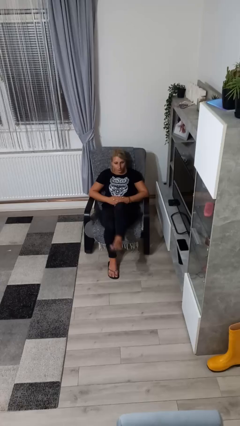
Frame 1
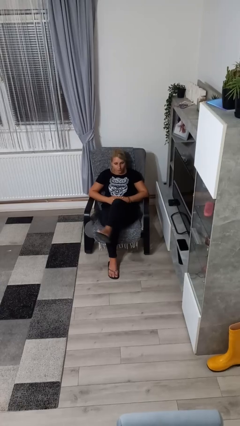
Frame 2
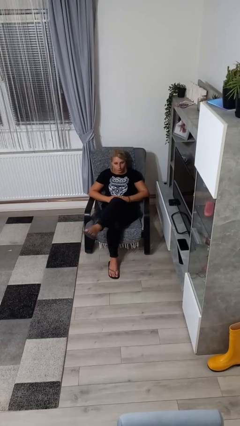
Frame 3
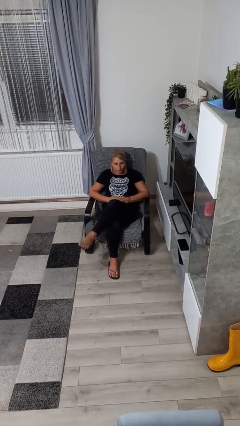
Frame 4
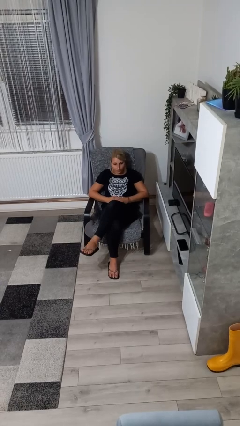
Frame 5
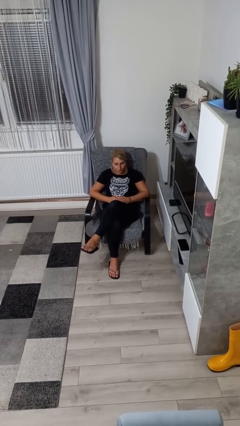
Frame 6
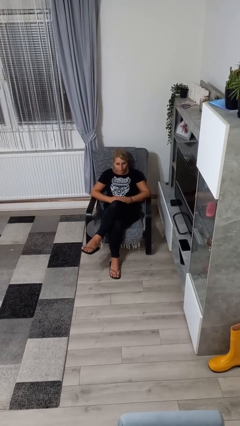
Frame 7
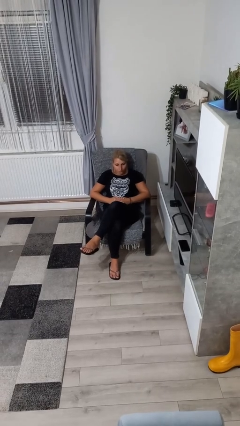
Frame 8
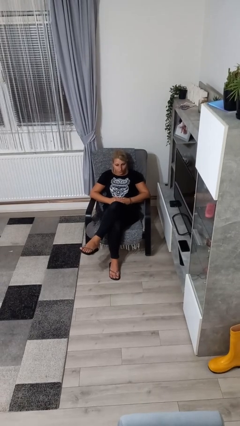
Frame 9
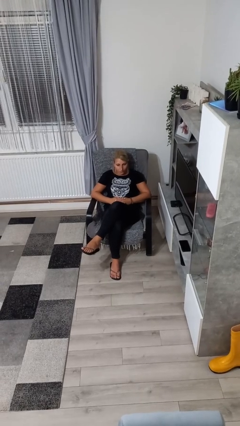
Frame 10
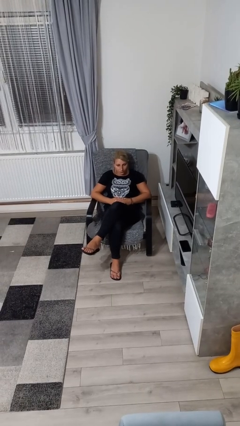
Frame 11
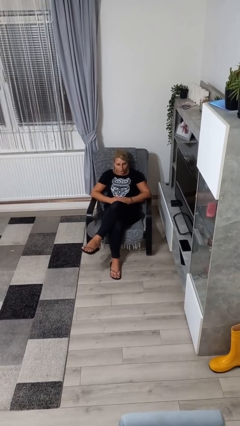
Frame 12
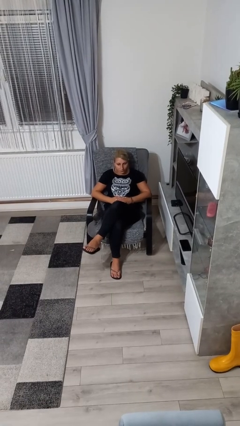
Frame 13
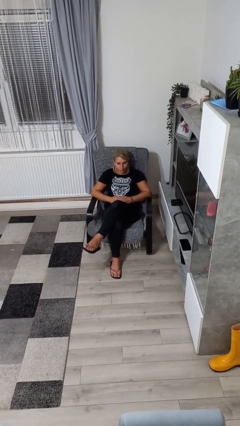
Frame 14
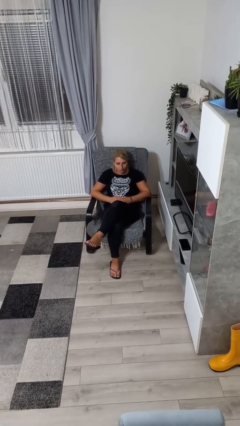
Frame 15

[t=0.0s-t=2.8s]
person crosses legs

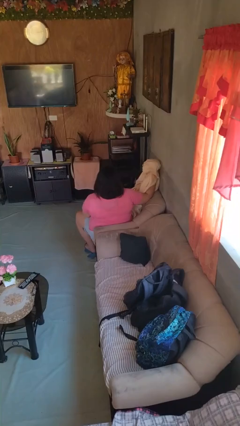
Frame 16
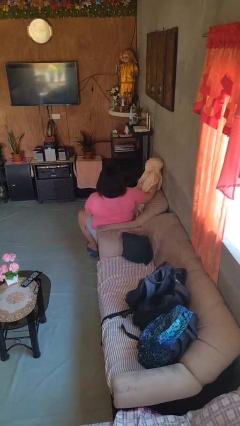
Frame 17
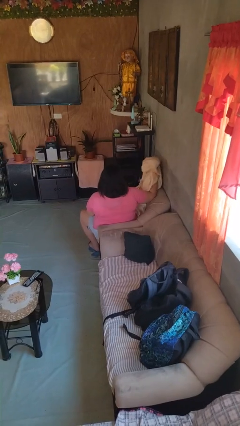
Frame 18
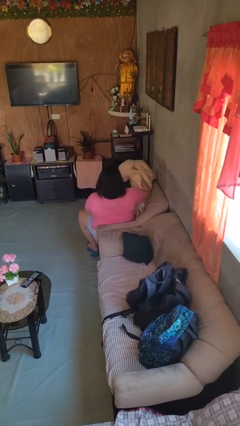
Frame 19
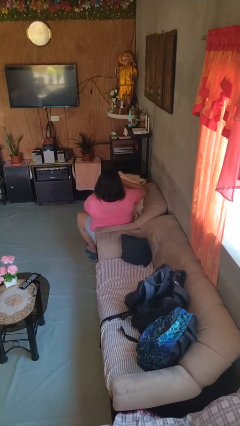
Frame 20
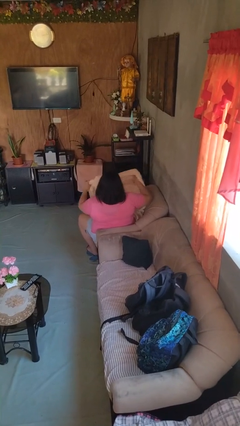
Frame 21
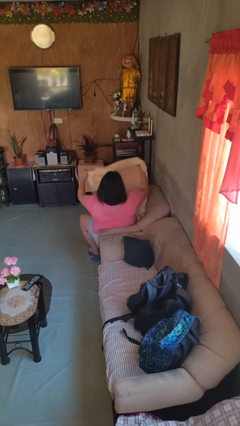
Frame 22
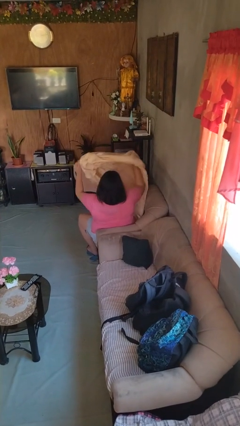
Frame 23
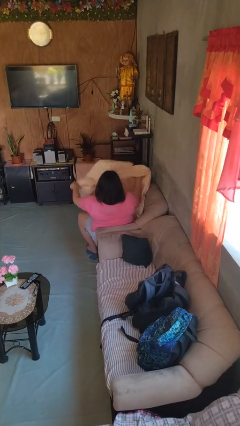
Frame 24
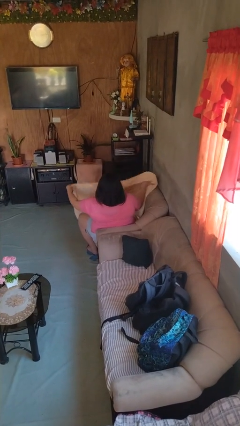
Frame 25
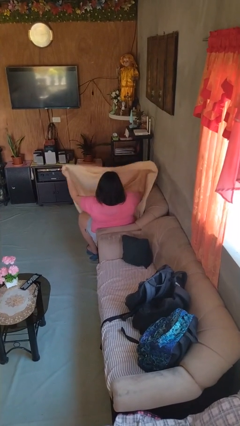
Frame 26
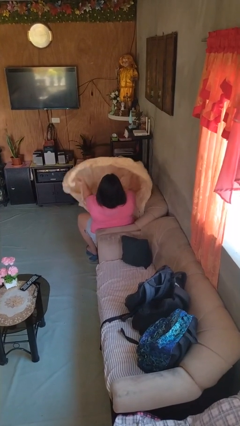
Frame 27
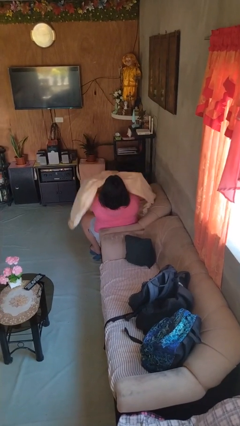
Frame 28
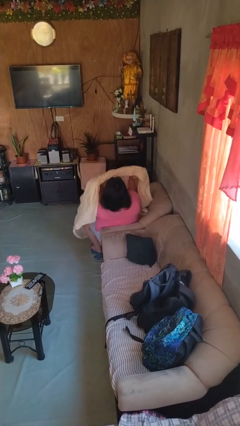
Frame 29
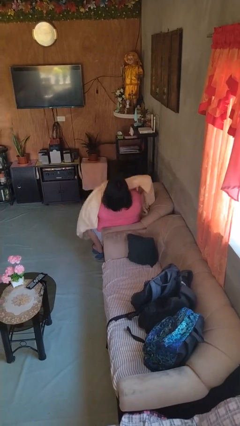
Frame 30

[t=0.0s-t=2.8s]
person covers with blanket

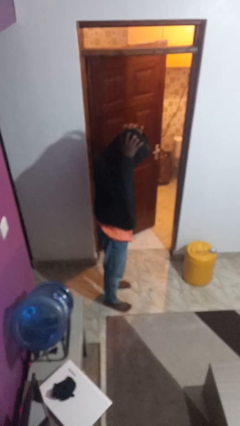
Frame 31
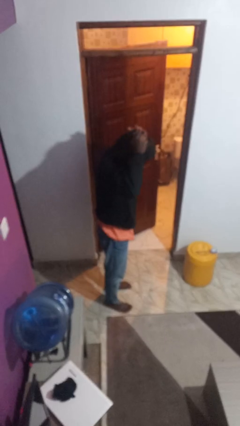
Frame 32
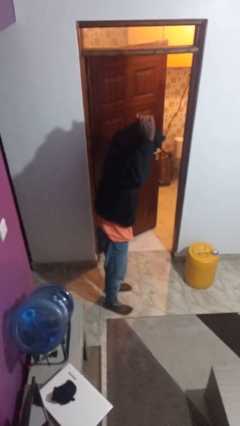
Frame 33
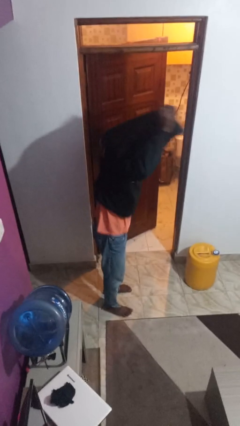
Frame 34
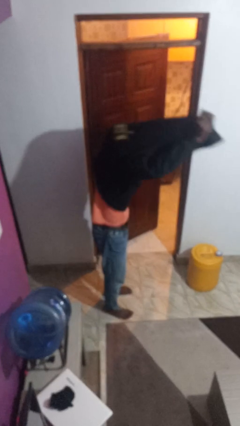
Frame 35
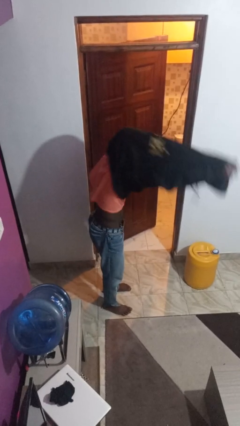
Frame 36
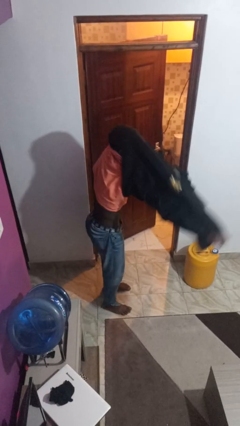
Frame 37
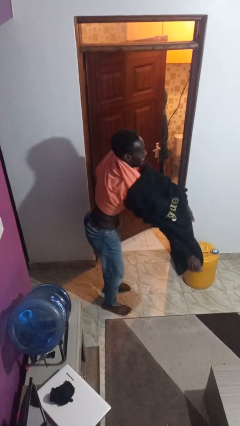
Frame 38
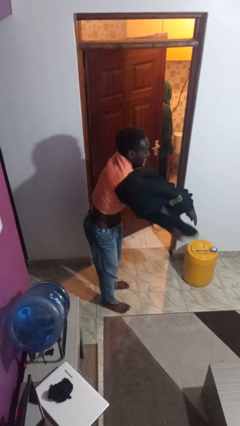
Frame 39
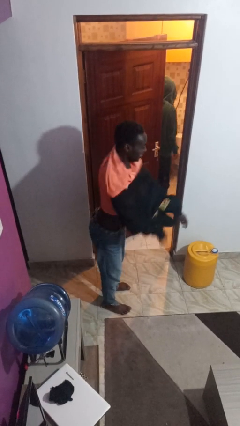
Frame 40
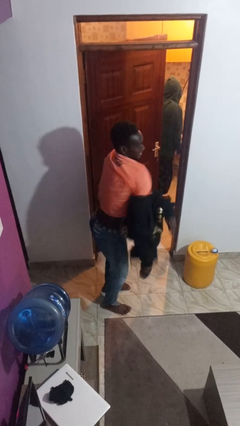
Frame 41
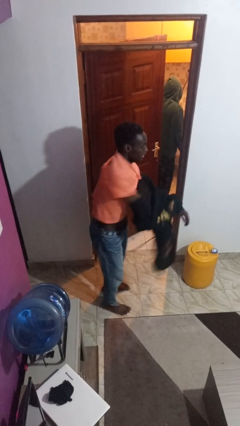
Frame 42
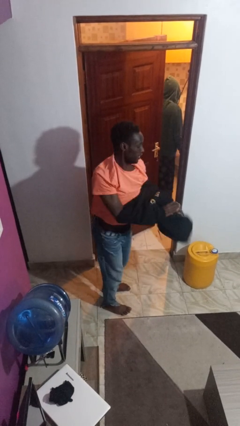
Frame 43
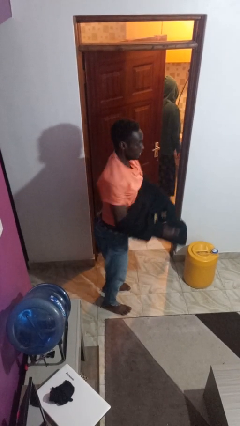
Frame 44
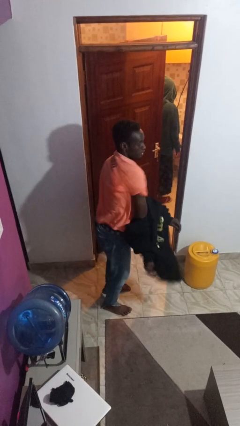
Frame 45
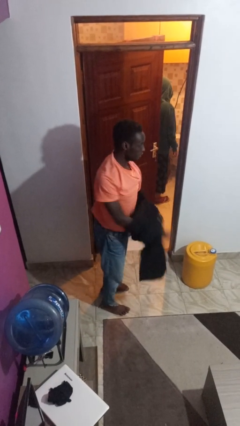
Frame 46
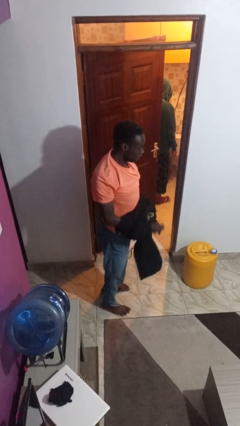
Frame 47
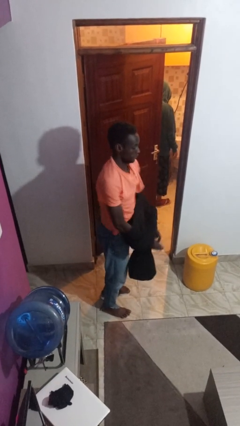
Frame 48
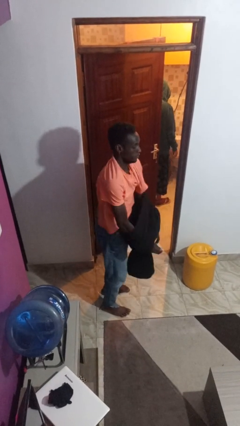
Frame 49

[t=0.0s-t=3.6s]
person takes off hoodie

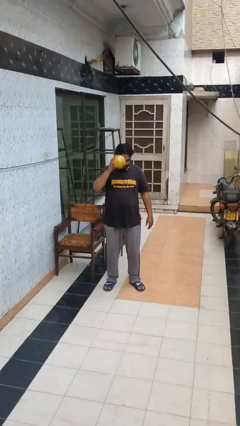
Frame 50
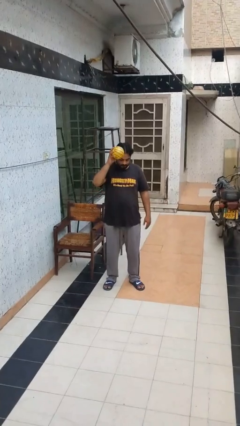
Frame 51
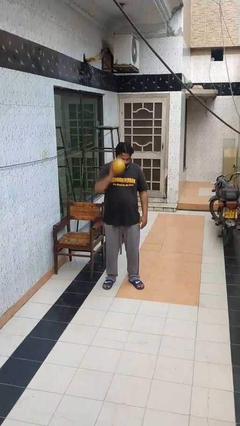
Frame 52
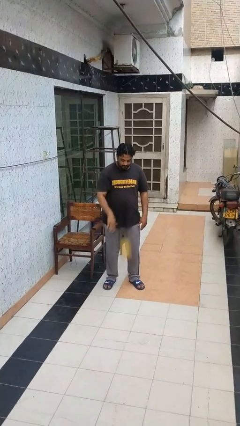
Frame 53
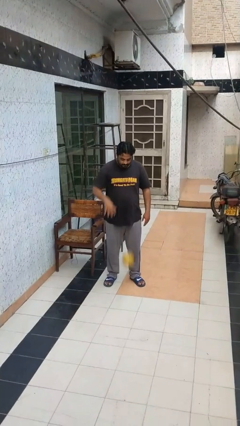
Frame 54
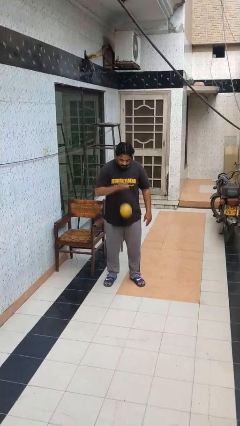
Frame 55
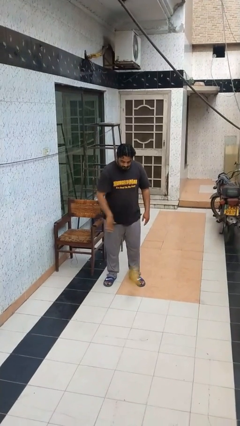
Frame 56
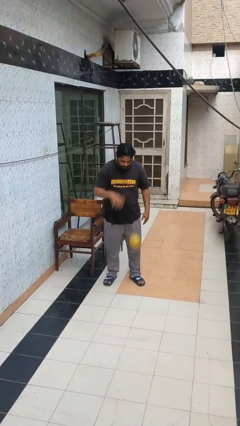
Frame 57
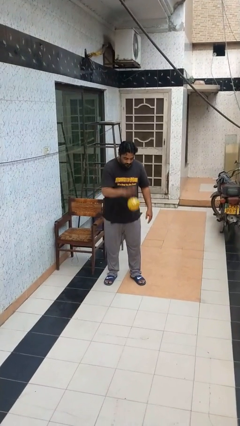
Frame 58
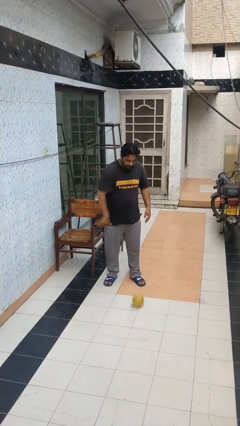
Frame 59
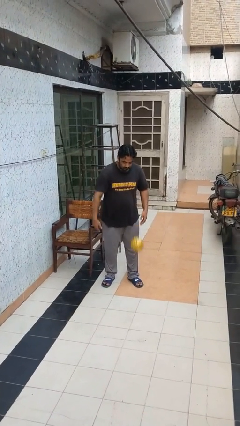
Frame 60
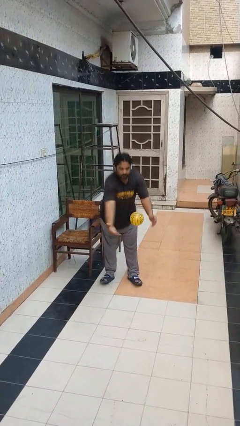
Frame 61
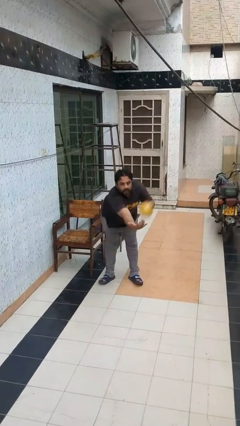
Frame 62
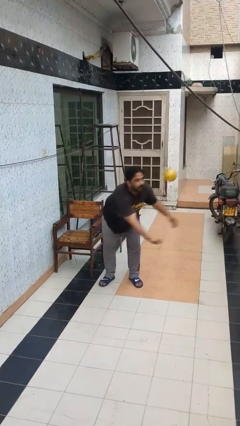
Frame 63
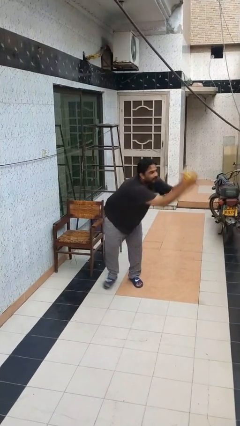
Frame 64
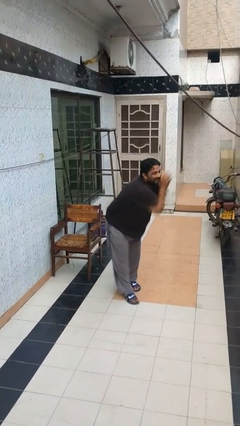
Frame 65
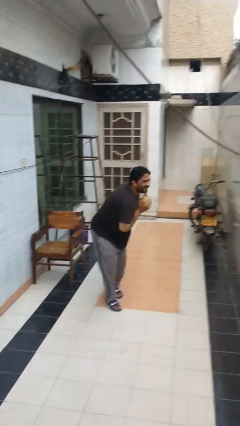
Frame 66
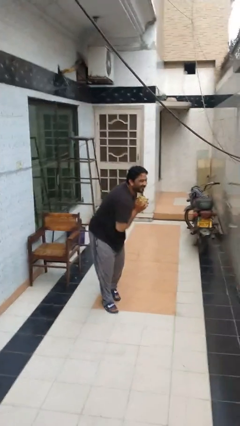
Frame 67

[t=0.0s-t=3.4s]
person bounces ball on floor

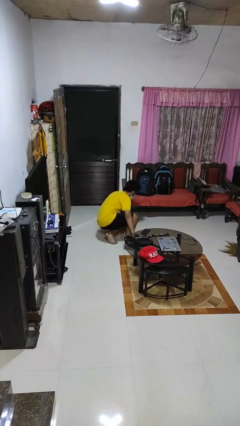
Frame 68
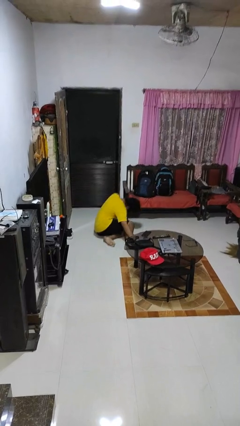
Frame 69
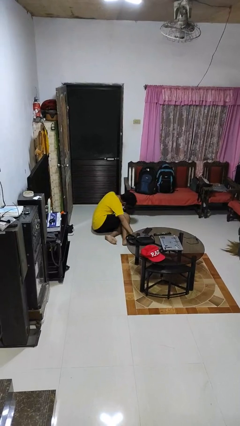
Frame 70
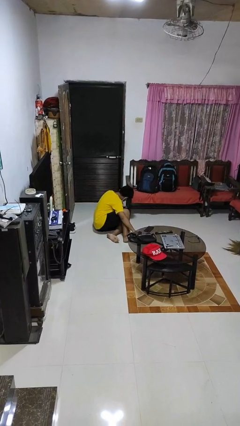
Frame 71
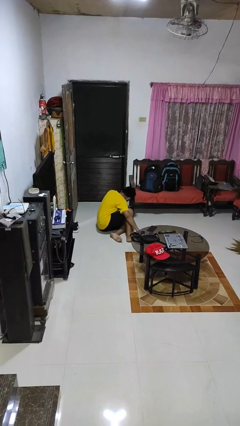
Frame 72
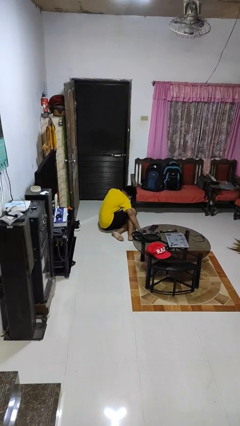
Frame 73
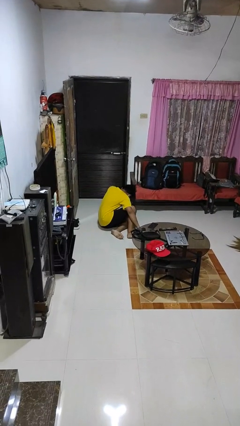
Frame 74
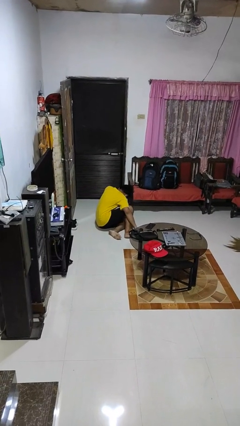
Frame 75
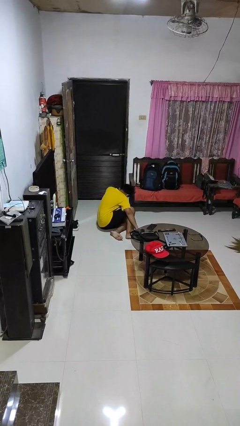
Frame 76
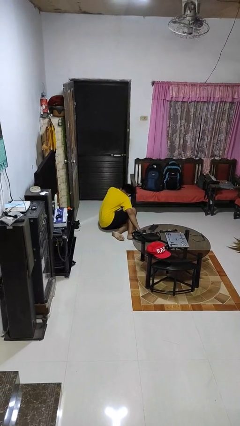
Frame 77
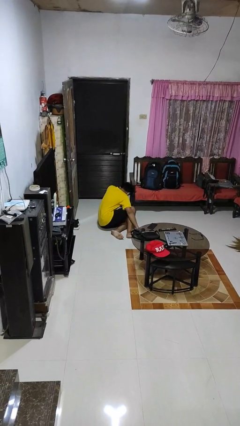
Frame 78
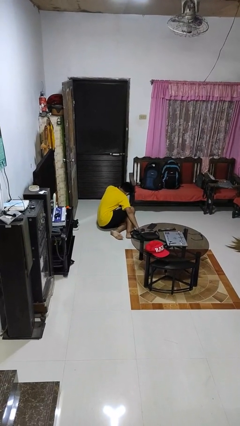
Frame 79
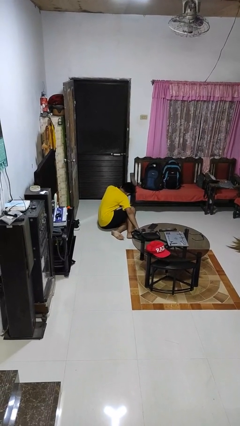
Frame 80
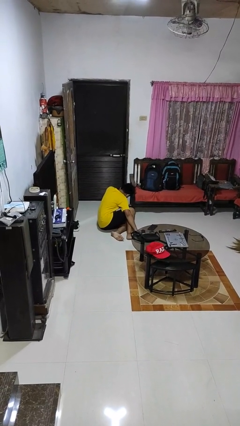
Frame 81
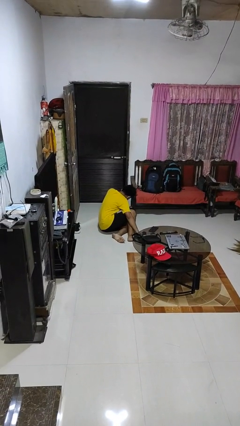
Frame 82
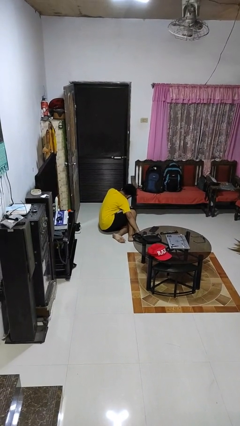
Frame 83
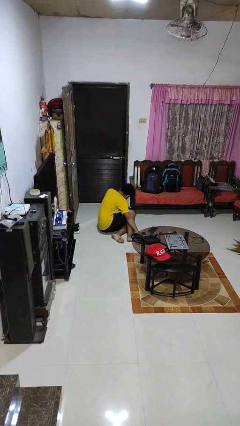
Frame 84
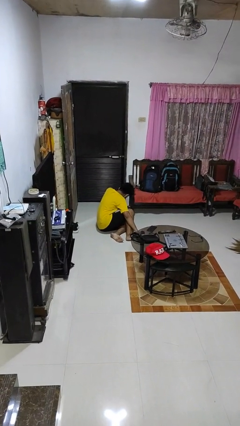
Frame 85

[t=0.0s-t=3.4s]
person lies down on floor

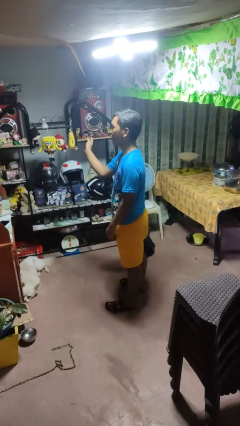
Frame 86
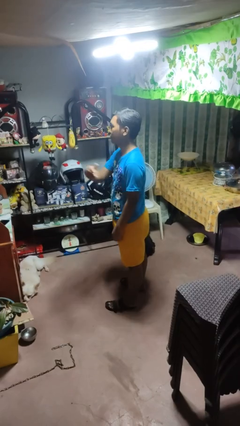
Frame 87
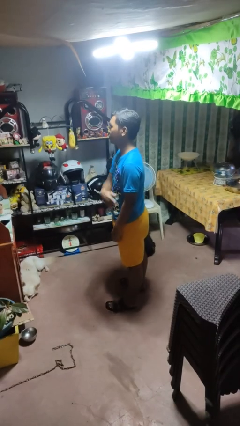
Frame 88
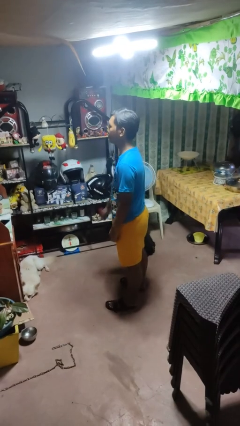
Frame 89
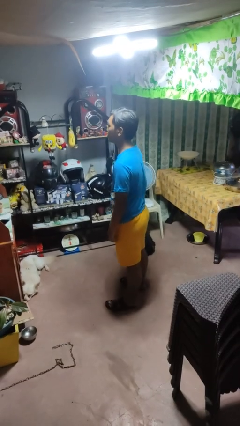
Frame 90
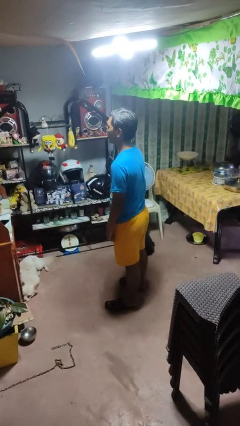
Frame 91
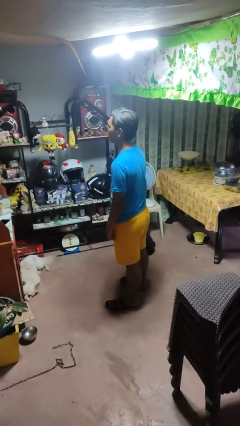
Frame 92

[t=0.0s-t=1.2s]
person gestures swipe left

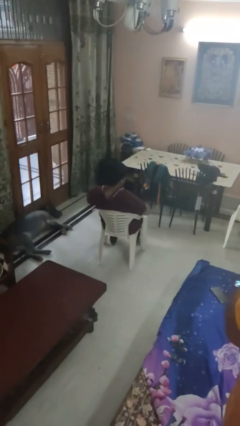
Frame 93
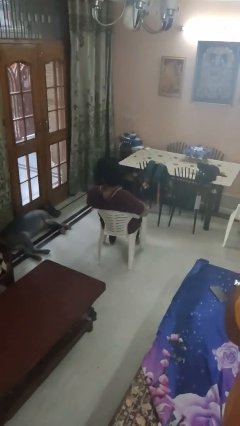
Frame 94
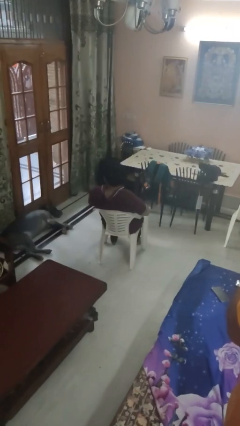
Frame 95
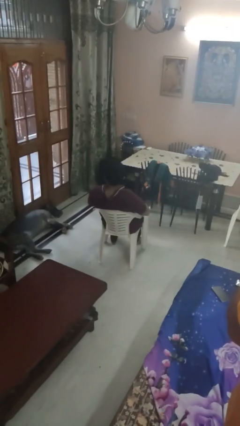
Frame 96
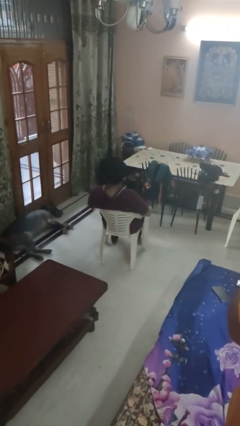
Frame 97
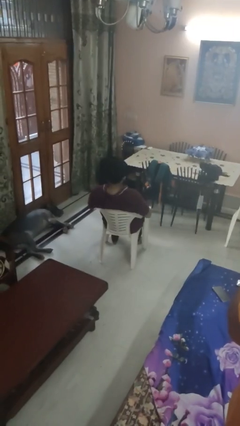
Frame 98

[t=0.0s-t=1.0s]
person shrugs
